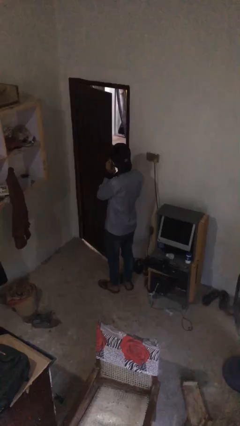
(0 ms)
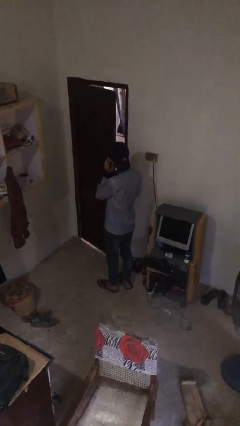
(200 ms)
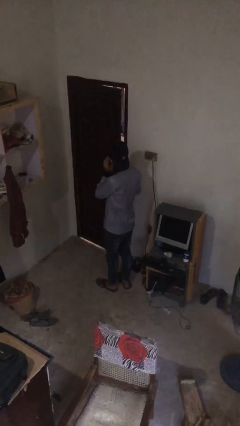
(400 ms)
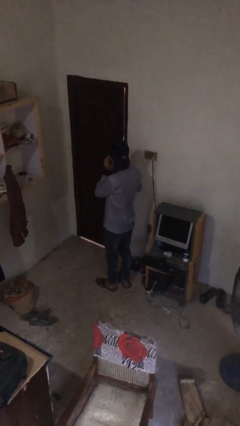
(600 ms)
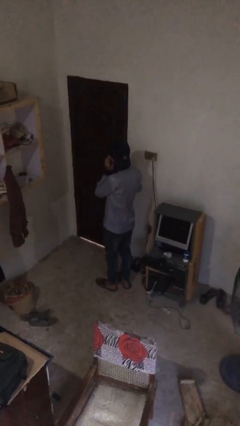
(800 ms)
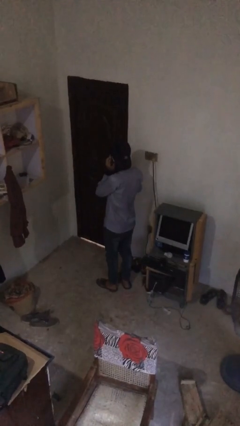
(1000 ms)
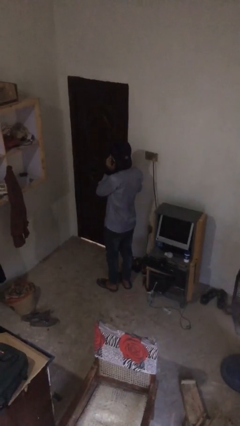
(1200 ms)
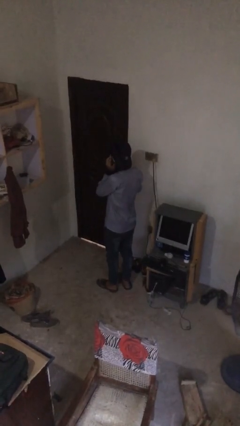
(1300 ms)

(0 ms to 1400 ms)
person closes facility door

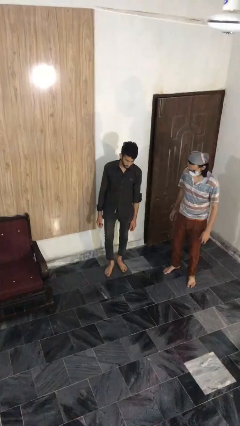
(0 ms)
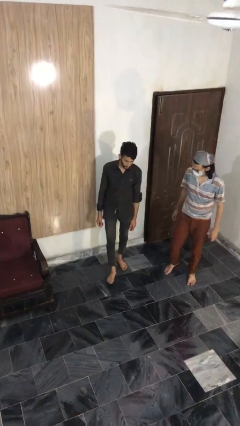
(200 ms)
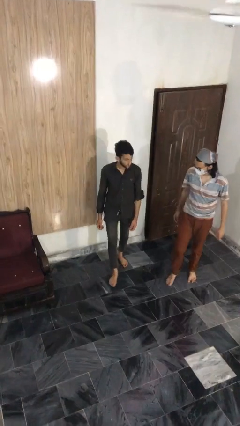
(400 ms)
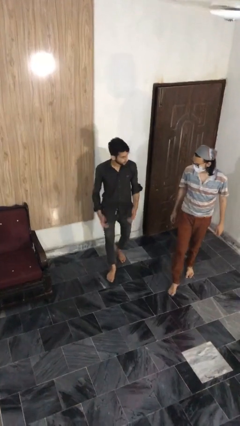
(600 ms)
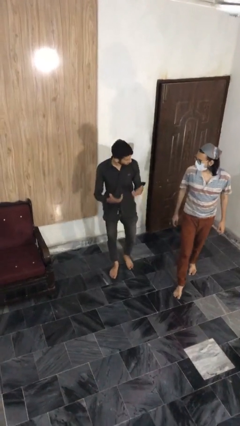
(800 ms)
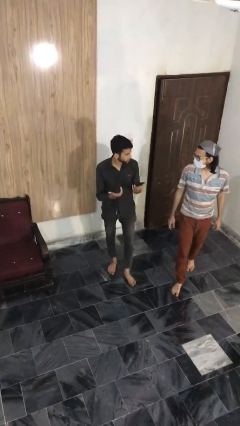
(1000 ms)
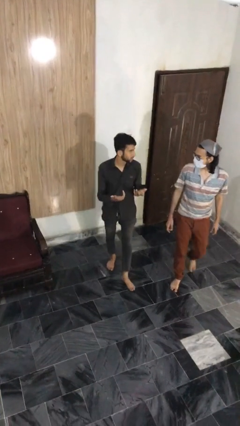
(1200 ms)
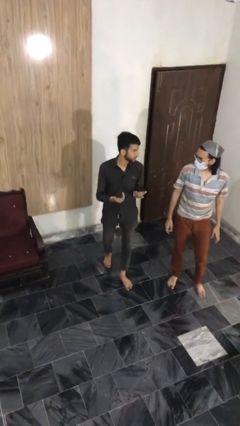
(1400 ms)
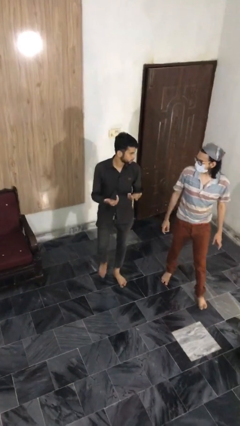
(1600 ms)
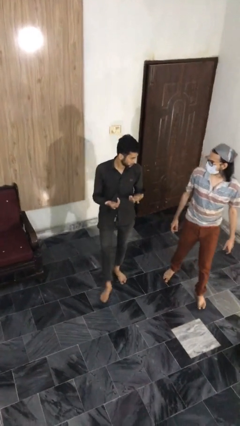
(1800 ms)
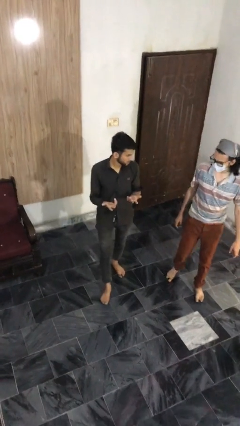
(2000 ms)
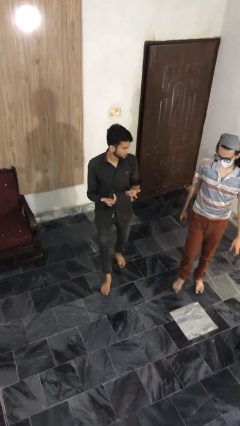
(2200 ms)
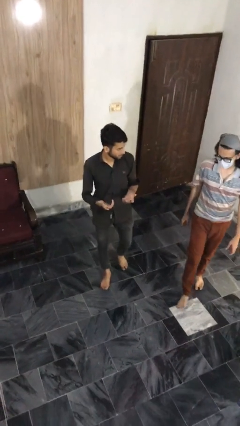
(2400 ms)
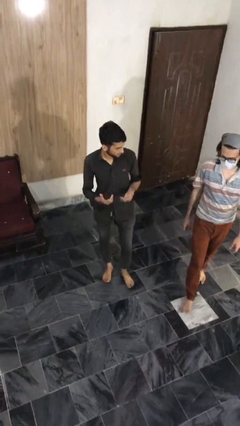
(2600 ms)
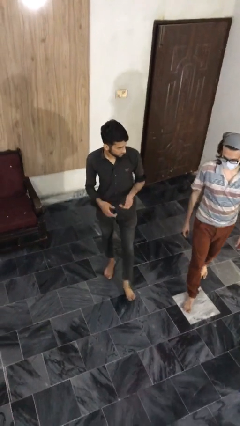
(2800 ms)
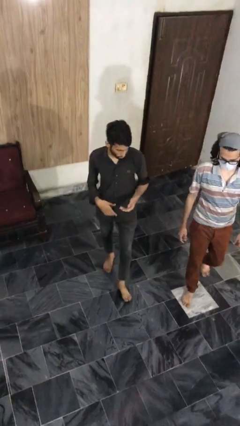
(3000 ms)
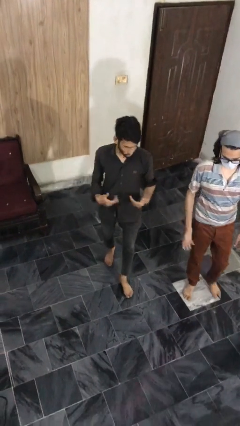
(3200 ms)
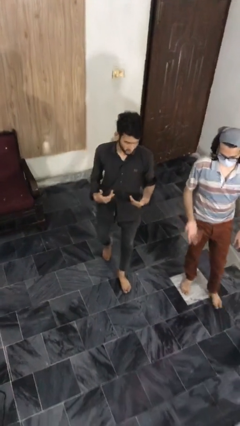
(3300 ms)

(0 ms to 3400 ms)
person talks to person

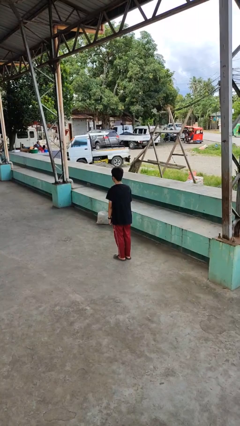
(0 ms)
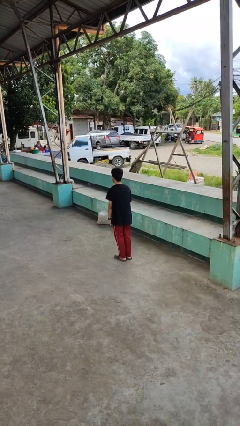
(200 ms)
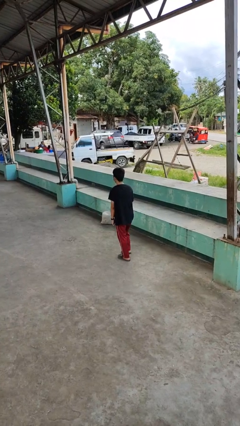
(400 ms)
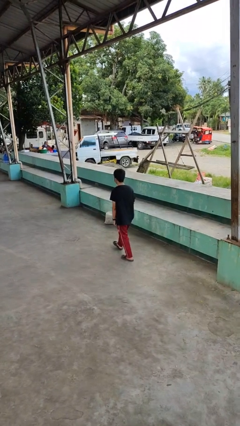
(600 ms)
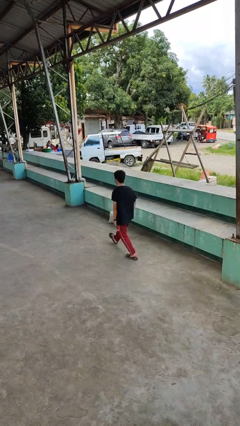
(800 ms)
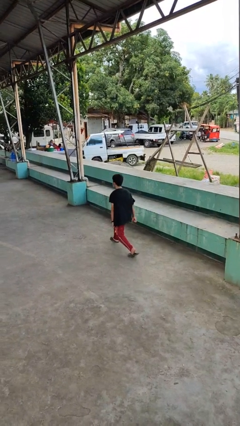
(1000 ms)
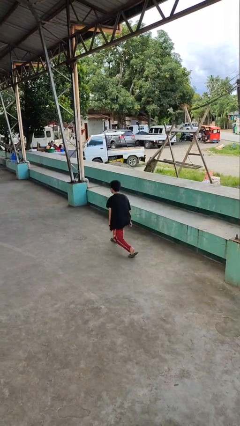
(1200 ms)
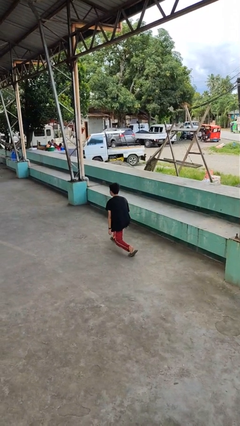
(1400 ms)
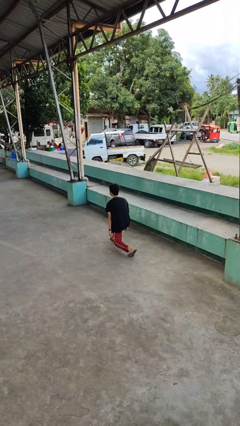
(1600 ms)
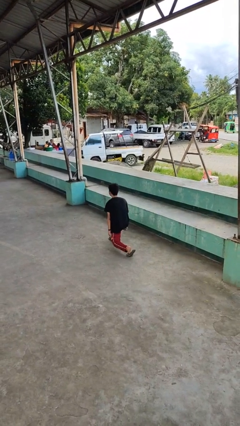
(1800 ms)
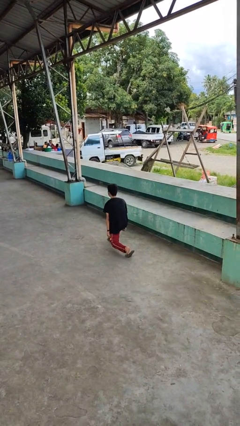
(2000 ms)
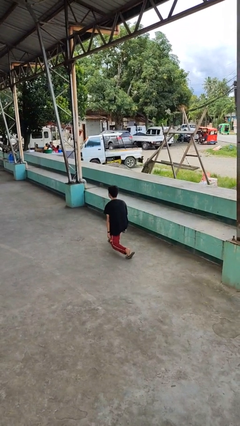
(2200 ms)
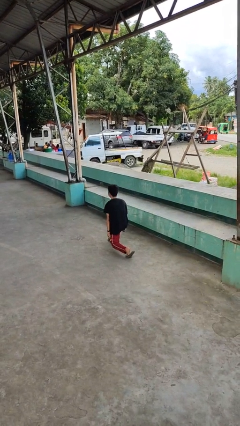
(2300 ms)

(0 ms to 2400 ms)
person exercises with lunges

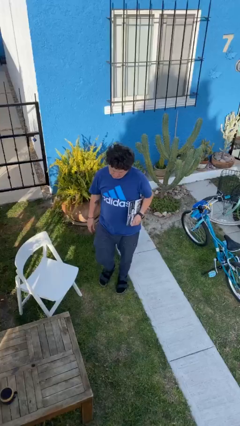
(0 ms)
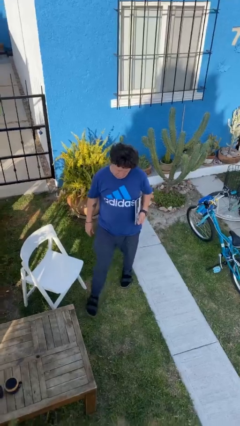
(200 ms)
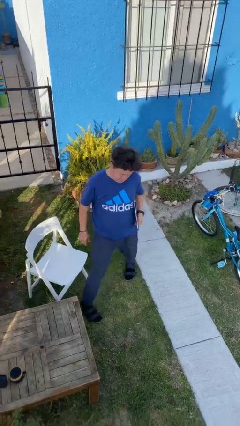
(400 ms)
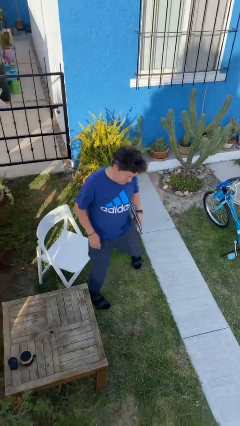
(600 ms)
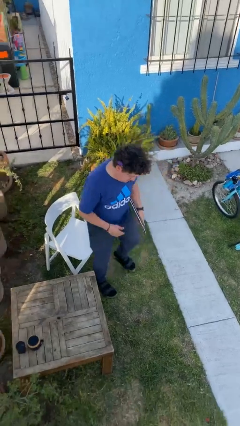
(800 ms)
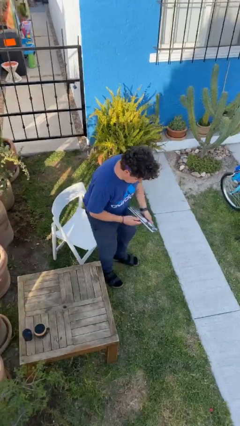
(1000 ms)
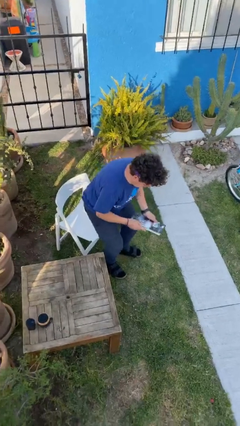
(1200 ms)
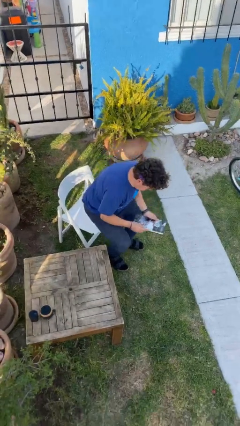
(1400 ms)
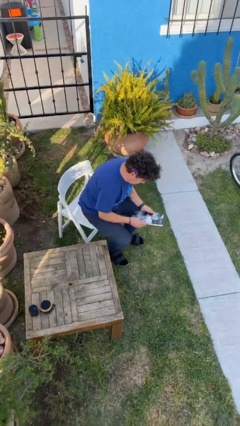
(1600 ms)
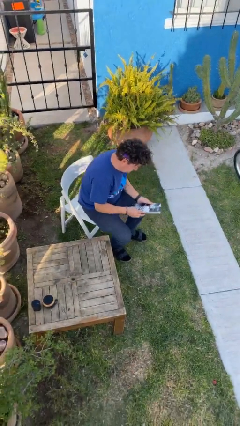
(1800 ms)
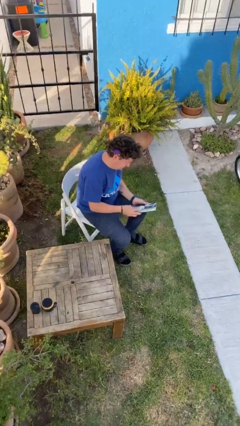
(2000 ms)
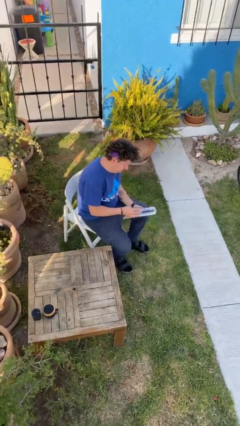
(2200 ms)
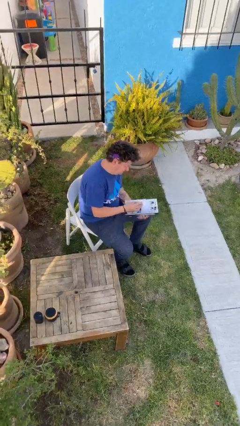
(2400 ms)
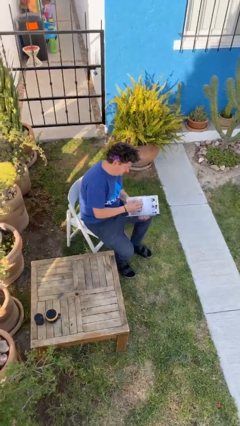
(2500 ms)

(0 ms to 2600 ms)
person sits down

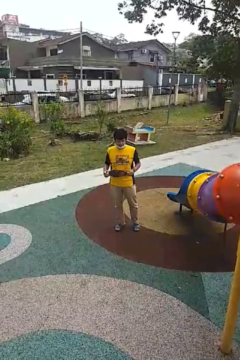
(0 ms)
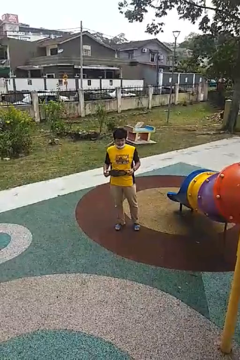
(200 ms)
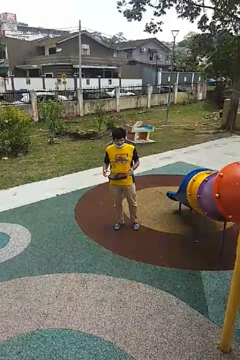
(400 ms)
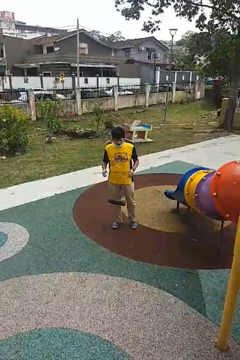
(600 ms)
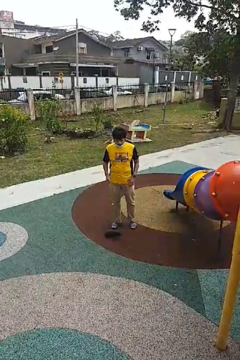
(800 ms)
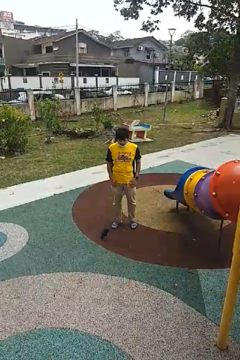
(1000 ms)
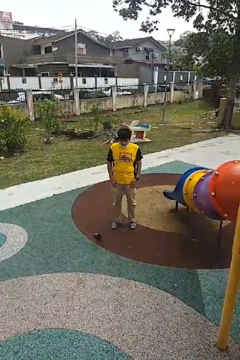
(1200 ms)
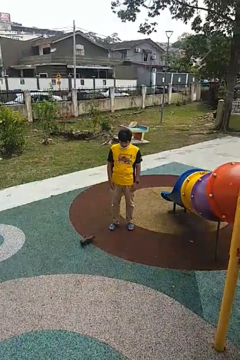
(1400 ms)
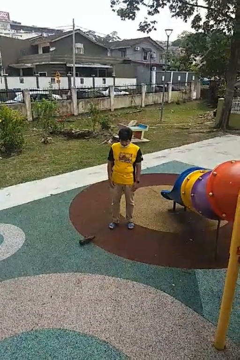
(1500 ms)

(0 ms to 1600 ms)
person drops object

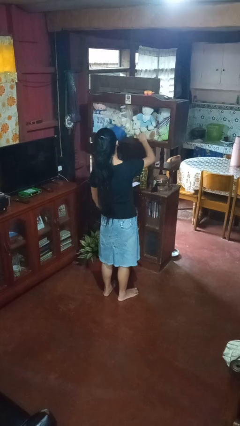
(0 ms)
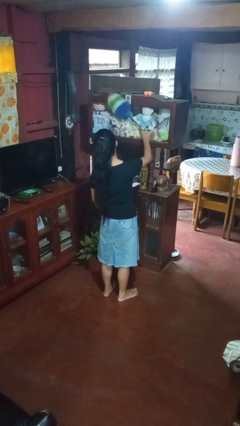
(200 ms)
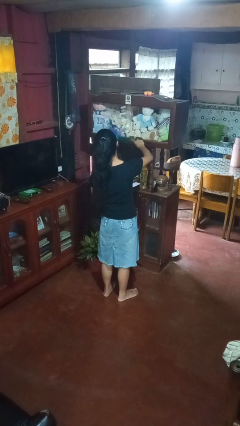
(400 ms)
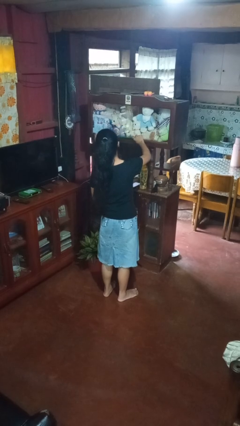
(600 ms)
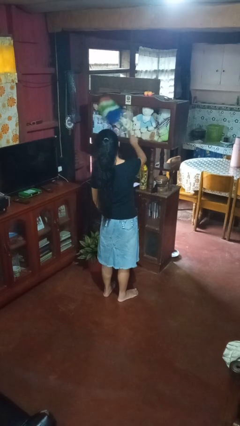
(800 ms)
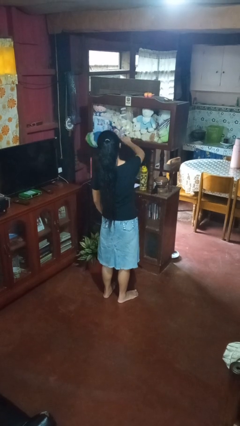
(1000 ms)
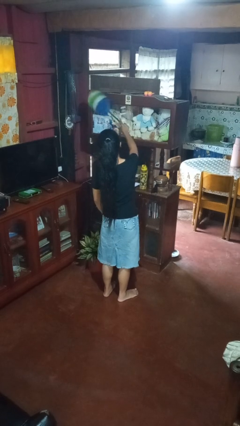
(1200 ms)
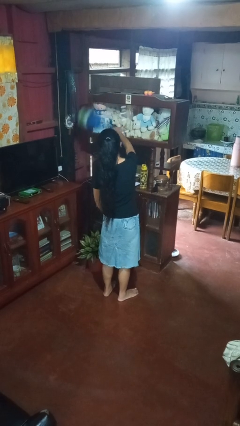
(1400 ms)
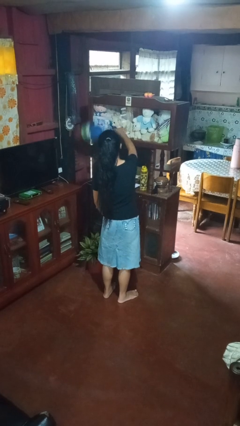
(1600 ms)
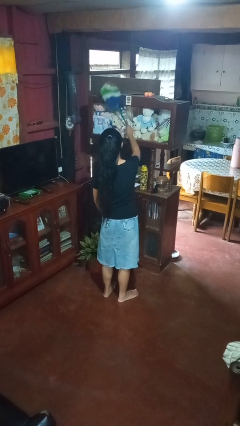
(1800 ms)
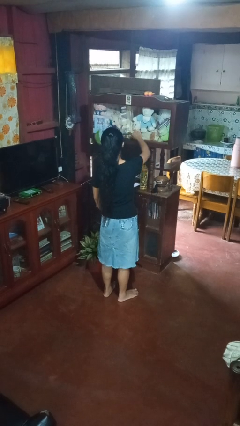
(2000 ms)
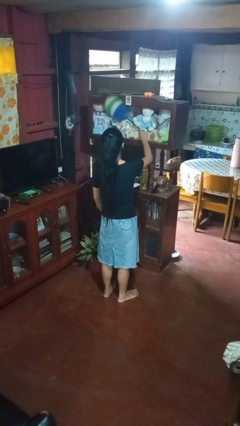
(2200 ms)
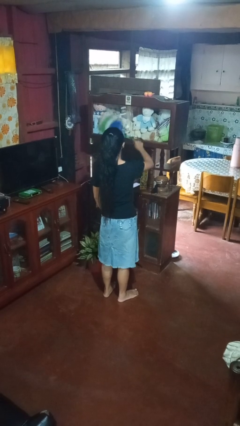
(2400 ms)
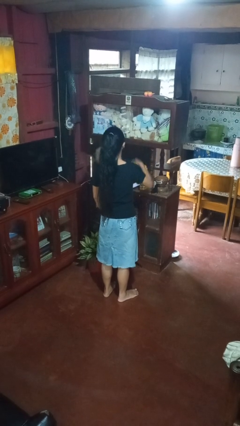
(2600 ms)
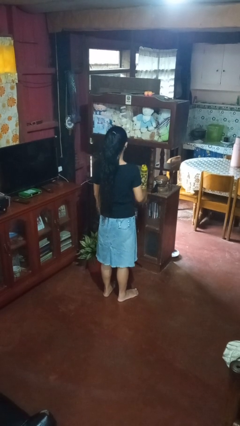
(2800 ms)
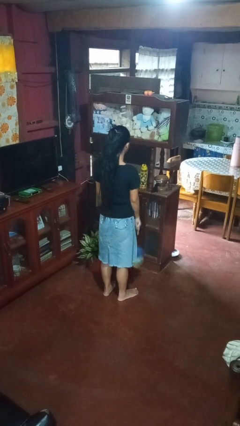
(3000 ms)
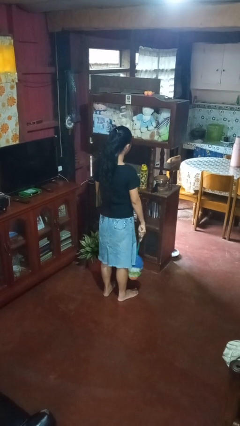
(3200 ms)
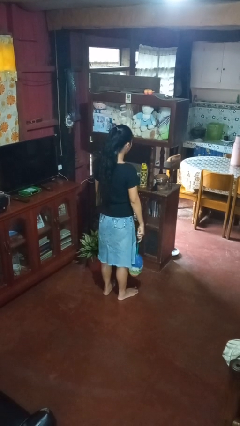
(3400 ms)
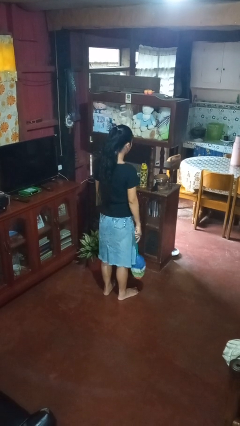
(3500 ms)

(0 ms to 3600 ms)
person dusts furniture

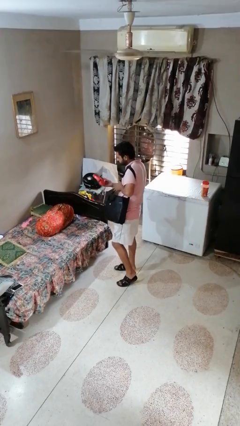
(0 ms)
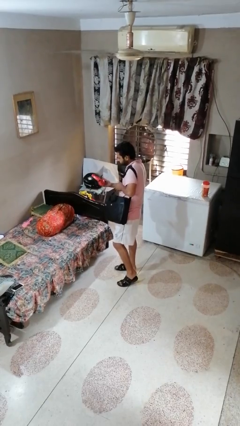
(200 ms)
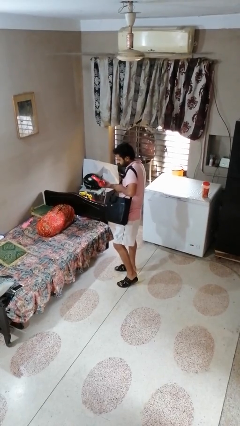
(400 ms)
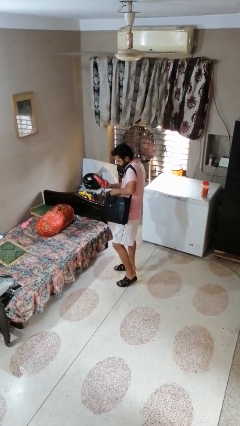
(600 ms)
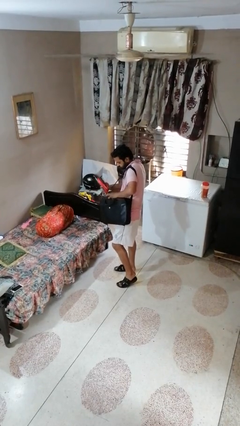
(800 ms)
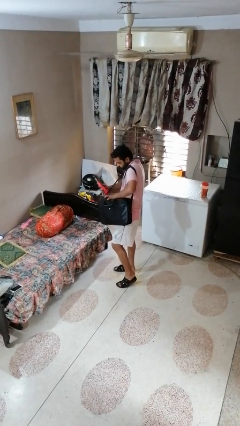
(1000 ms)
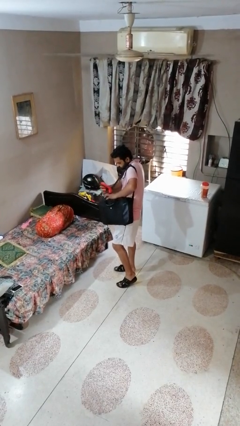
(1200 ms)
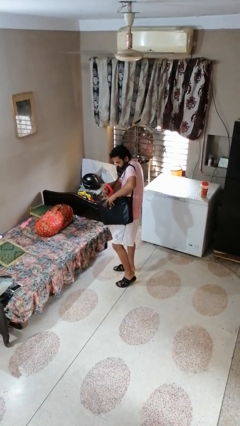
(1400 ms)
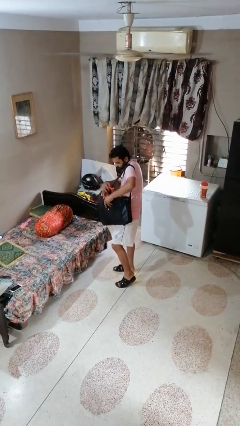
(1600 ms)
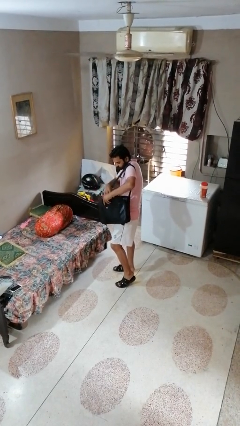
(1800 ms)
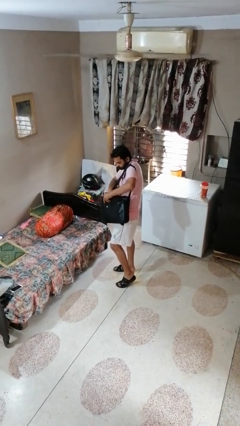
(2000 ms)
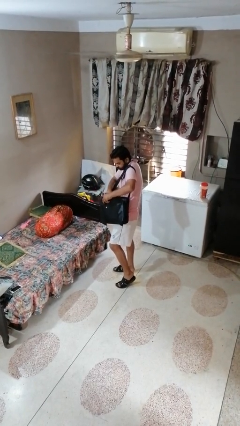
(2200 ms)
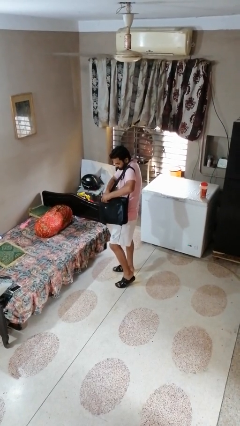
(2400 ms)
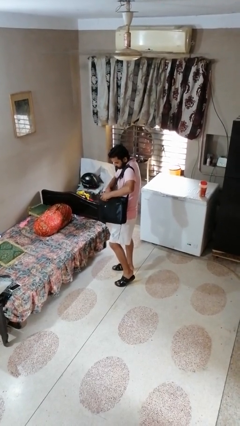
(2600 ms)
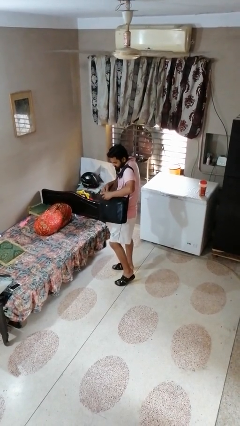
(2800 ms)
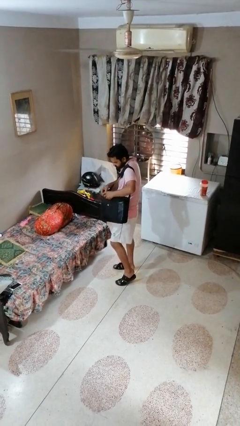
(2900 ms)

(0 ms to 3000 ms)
person puts object into backpack
